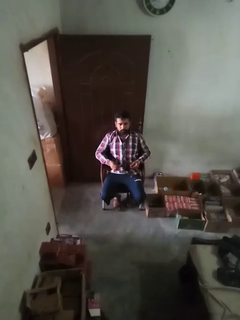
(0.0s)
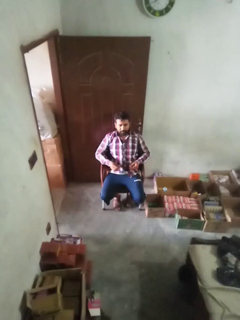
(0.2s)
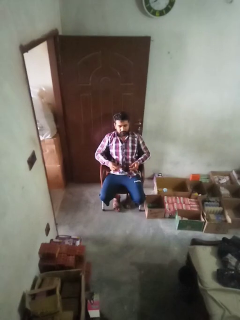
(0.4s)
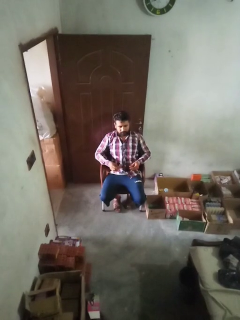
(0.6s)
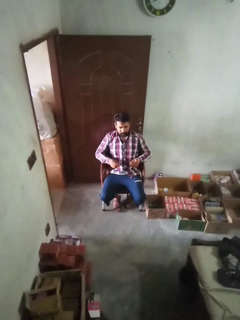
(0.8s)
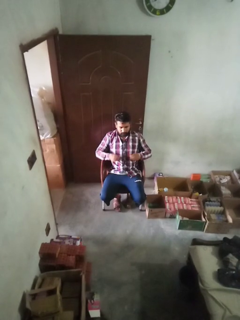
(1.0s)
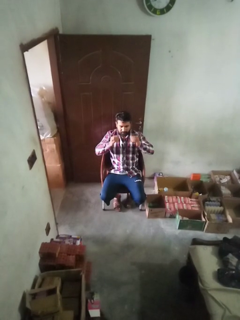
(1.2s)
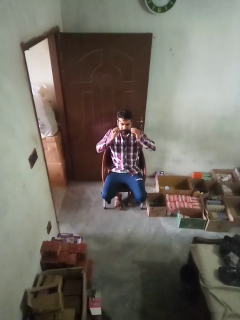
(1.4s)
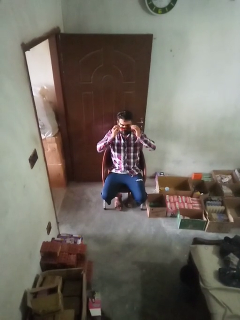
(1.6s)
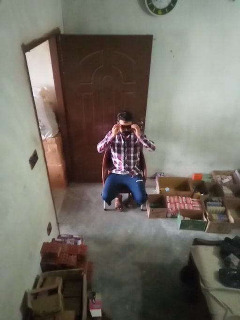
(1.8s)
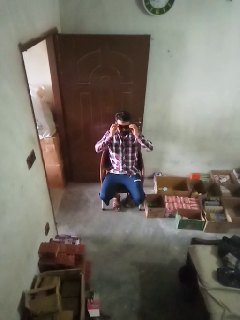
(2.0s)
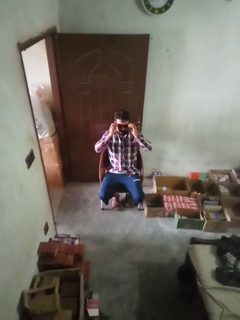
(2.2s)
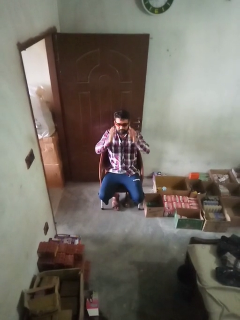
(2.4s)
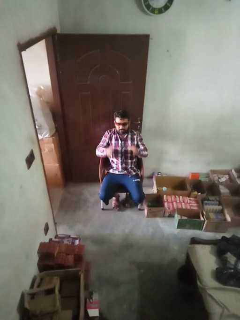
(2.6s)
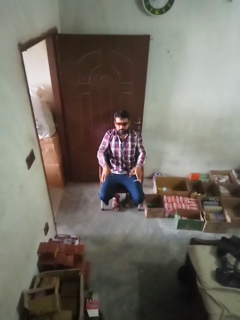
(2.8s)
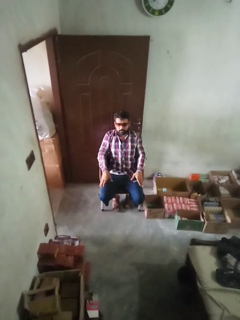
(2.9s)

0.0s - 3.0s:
person puts on sunglasses

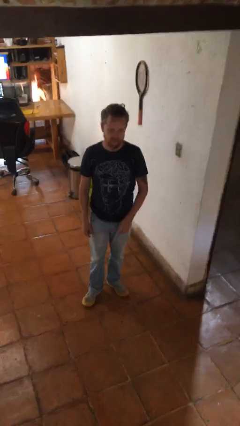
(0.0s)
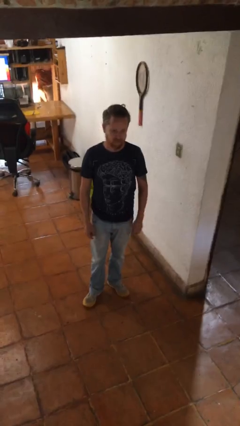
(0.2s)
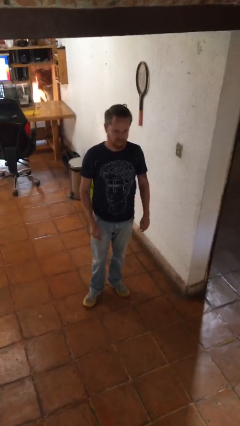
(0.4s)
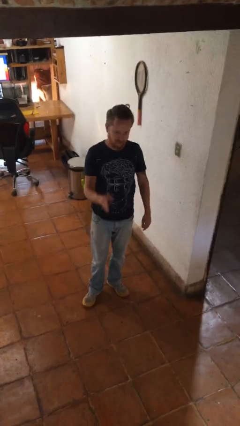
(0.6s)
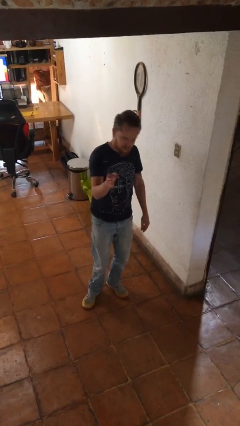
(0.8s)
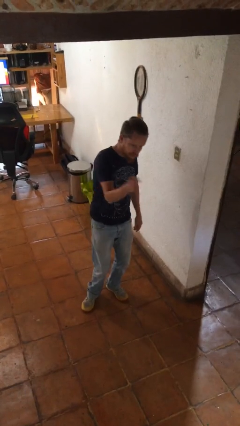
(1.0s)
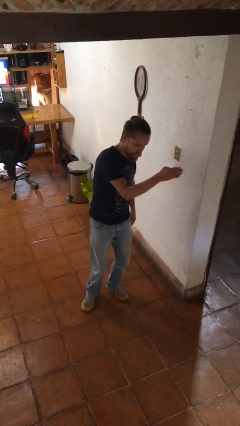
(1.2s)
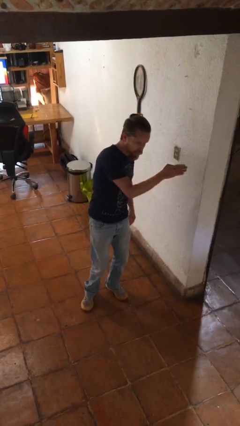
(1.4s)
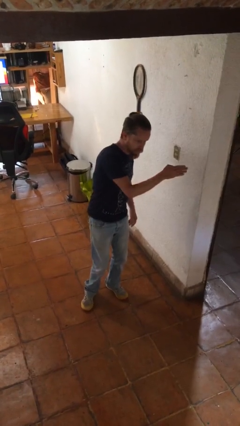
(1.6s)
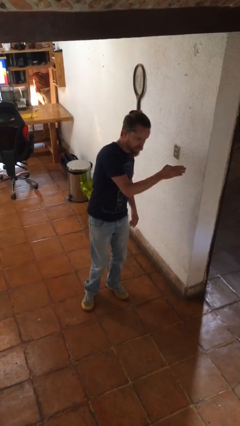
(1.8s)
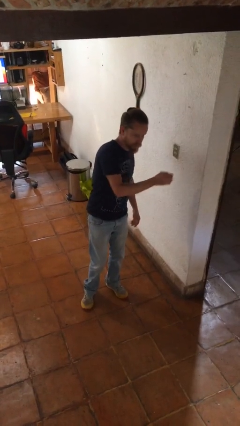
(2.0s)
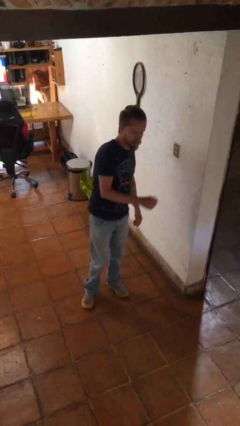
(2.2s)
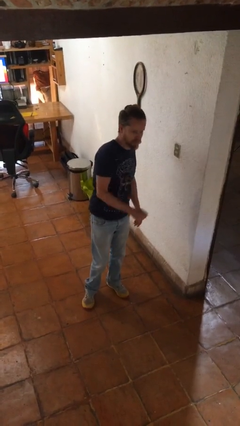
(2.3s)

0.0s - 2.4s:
person gestures swipe left

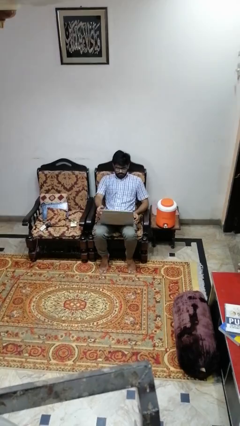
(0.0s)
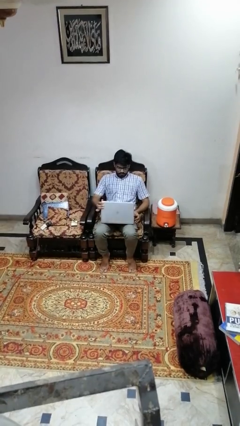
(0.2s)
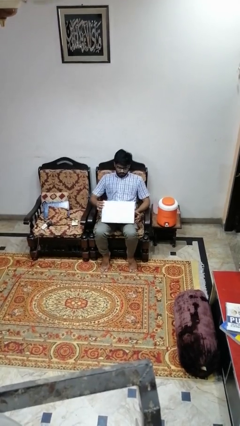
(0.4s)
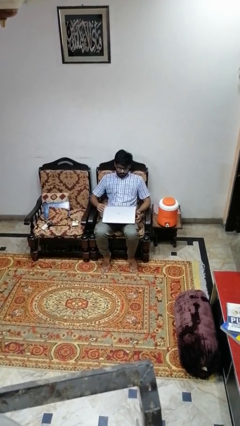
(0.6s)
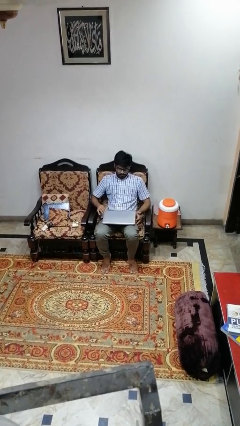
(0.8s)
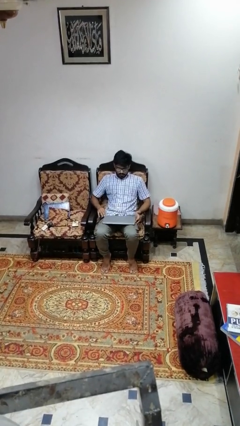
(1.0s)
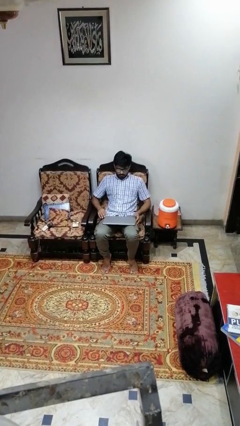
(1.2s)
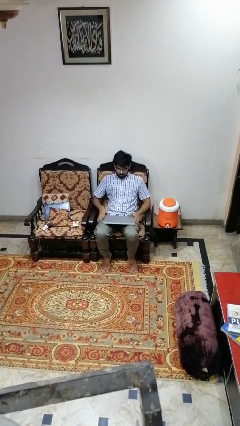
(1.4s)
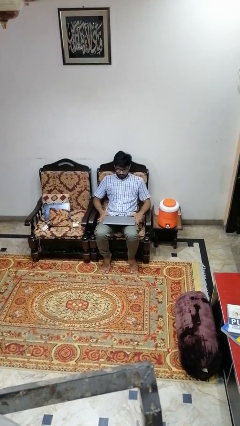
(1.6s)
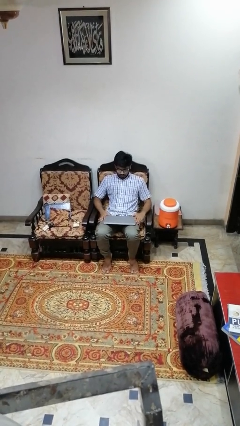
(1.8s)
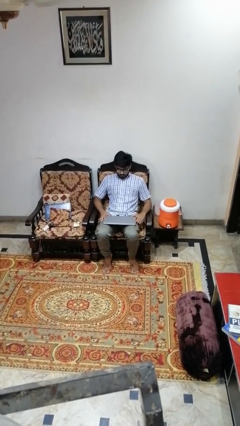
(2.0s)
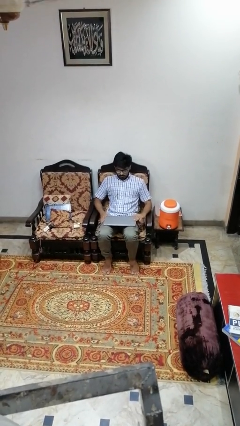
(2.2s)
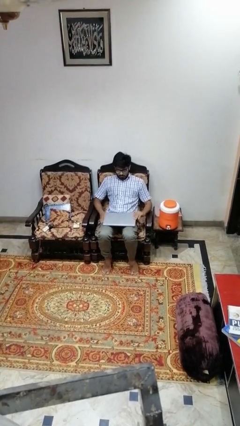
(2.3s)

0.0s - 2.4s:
person closes laptop

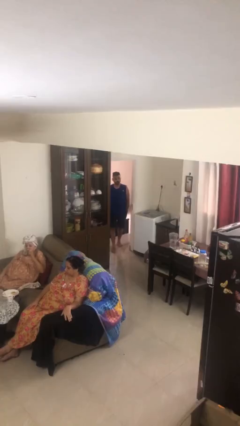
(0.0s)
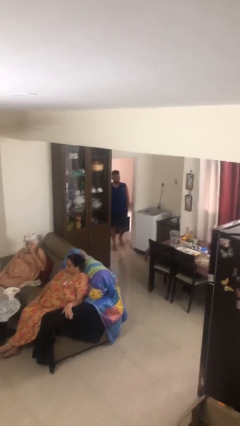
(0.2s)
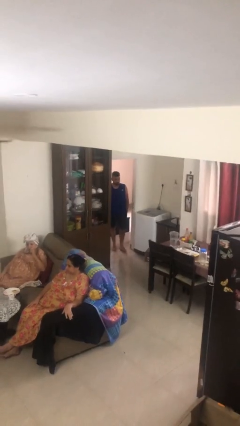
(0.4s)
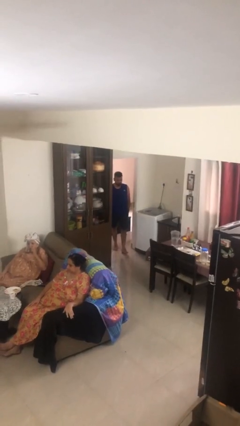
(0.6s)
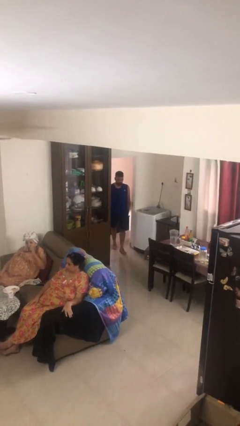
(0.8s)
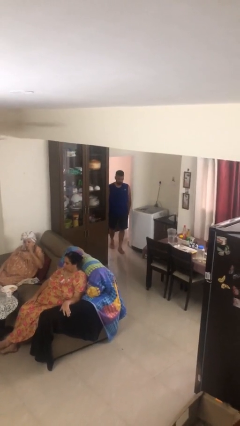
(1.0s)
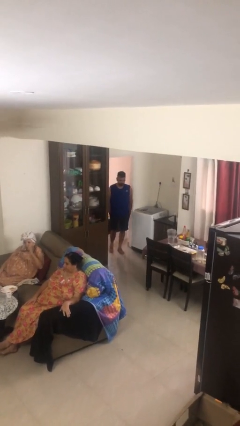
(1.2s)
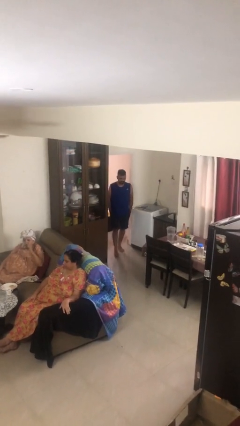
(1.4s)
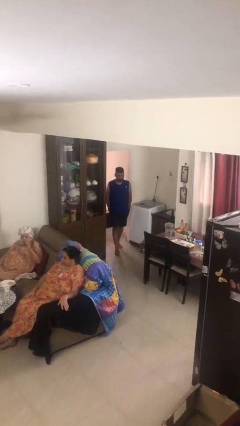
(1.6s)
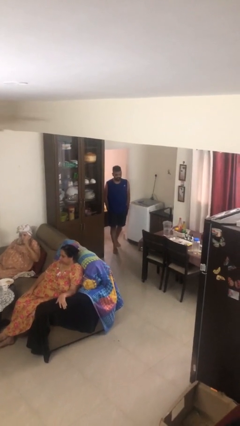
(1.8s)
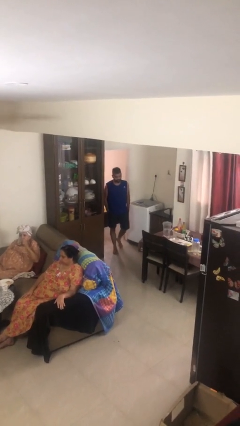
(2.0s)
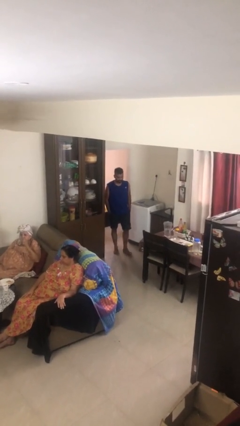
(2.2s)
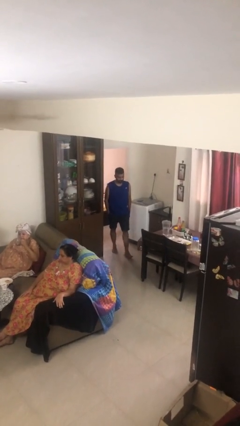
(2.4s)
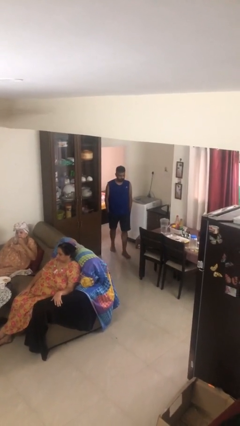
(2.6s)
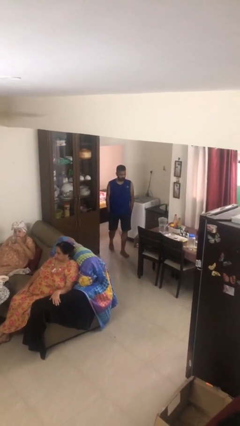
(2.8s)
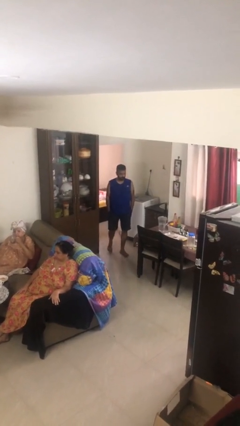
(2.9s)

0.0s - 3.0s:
person enters scene through structure

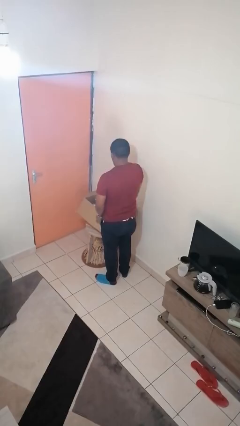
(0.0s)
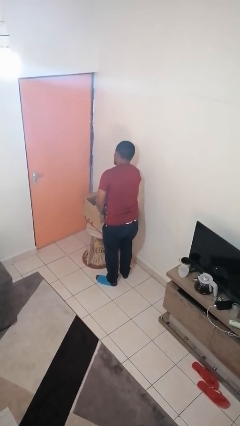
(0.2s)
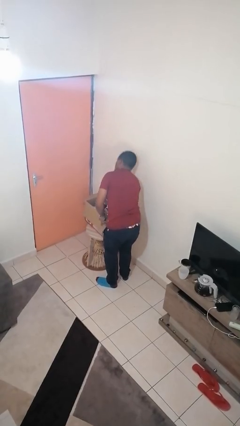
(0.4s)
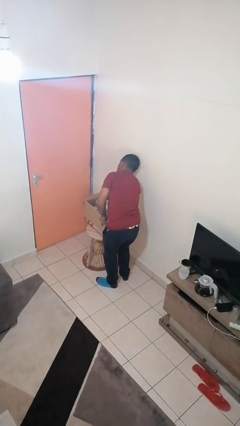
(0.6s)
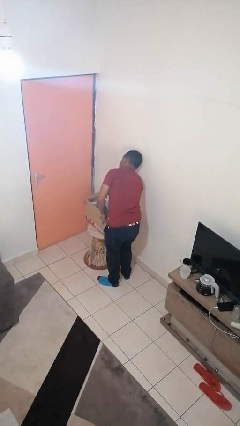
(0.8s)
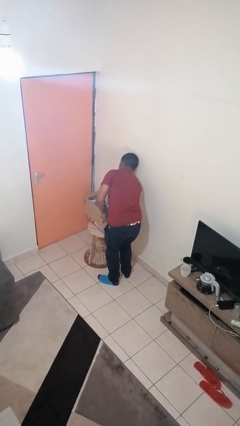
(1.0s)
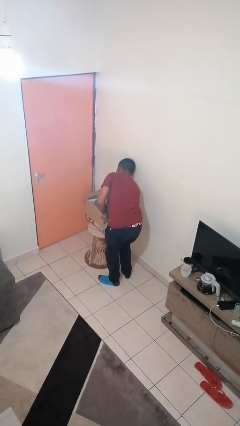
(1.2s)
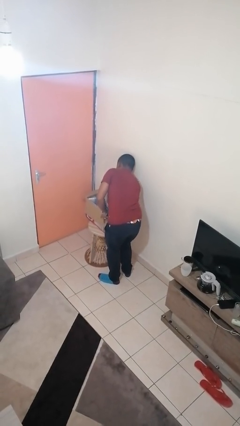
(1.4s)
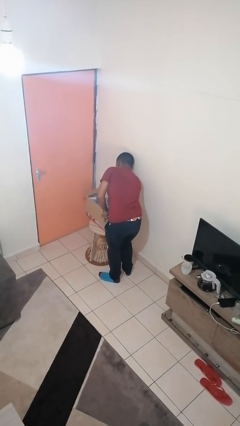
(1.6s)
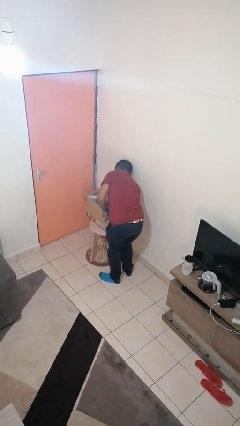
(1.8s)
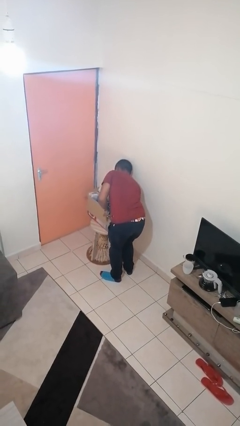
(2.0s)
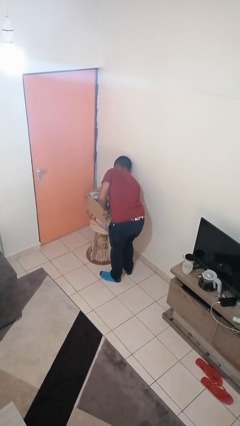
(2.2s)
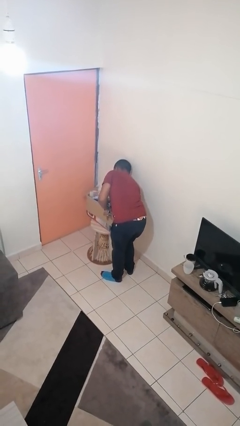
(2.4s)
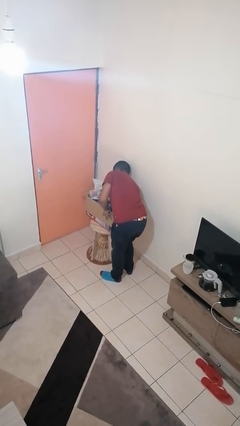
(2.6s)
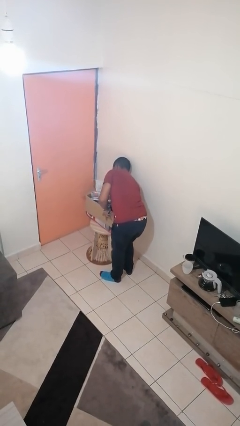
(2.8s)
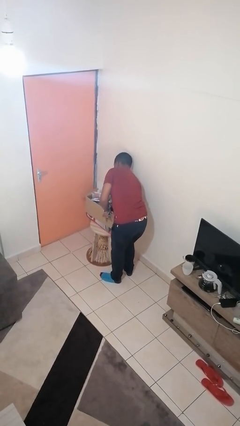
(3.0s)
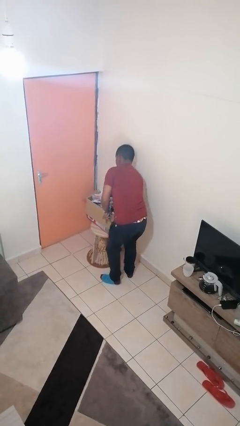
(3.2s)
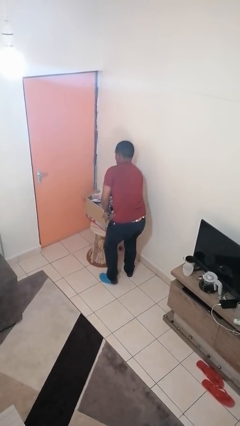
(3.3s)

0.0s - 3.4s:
person searches in box

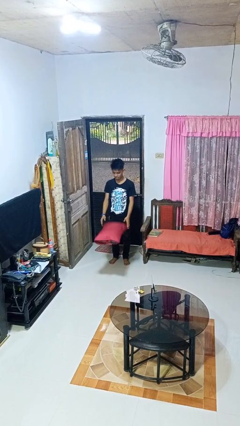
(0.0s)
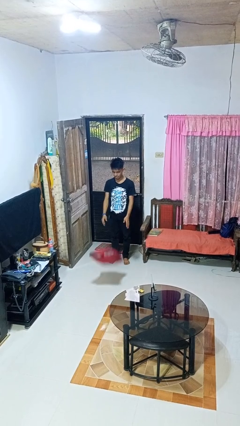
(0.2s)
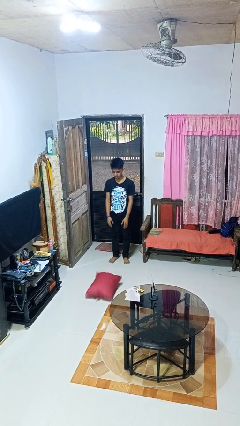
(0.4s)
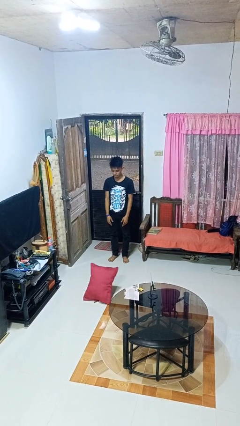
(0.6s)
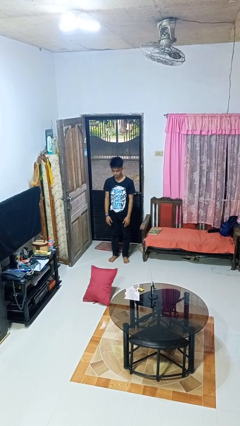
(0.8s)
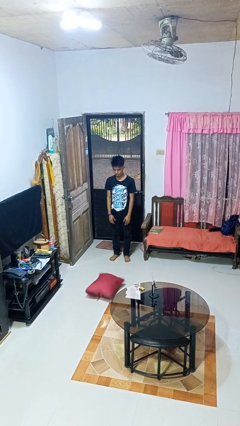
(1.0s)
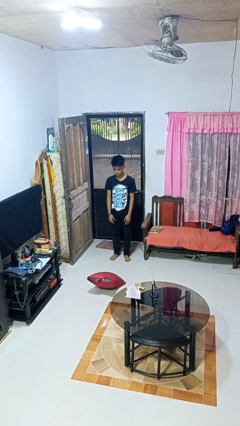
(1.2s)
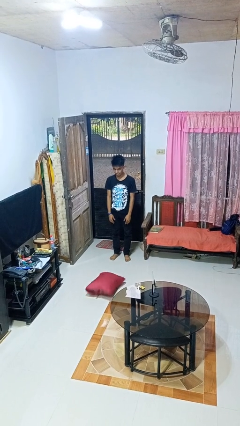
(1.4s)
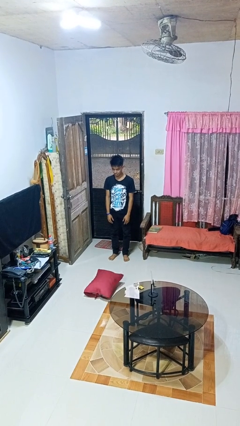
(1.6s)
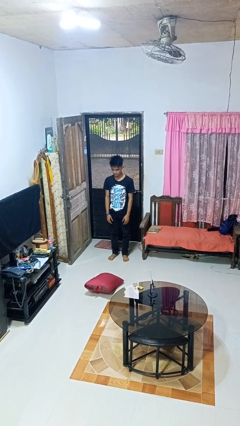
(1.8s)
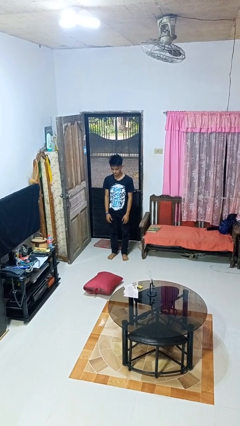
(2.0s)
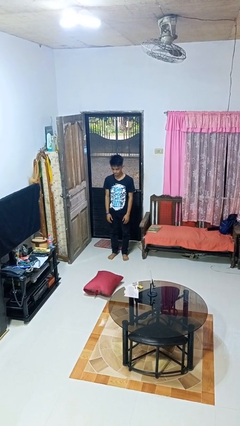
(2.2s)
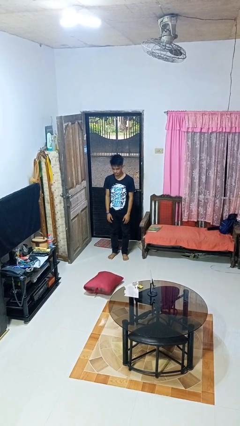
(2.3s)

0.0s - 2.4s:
person throws object to ground

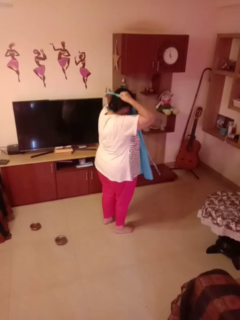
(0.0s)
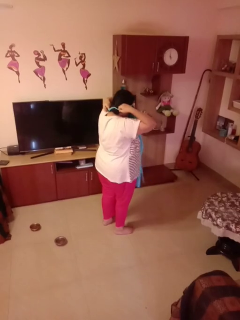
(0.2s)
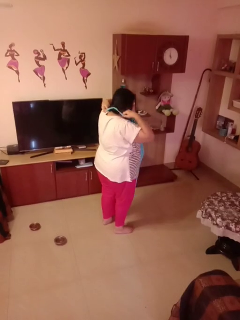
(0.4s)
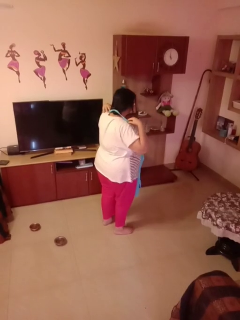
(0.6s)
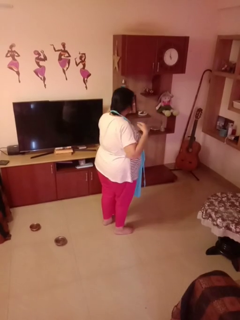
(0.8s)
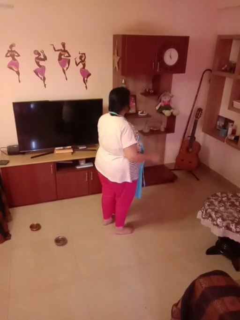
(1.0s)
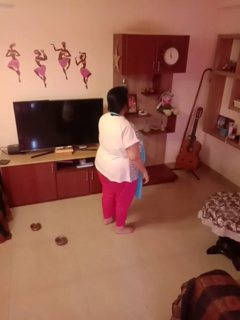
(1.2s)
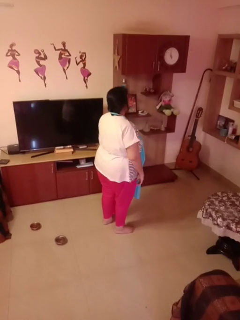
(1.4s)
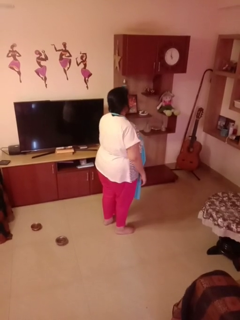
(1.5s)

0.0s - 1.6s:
person puts on apron
